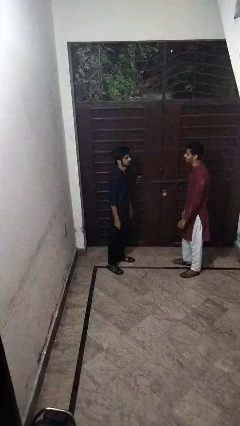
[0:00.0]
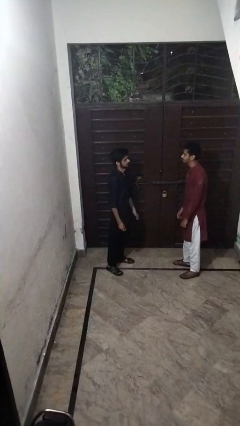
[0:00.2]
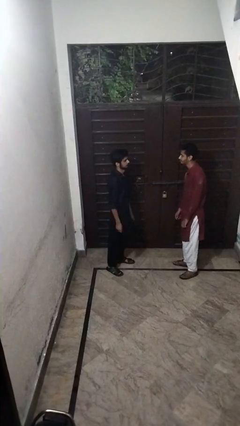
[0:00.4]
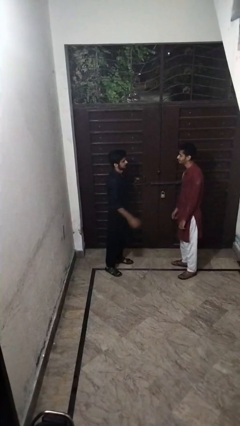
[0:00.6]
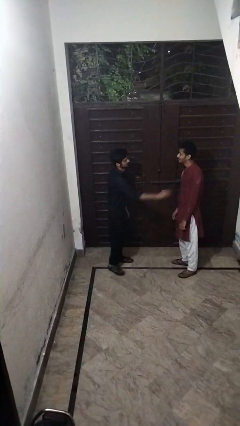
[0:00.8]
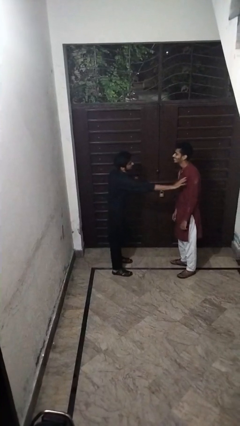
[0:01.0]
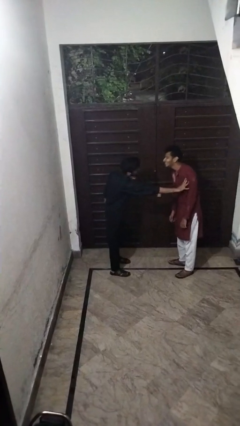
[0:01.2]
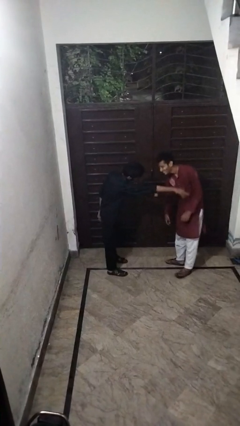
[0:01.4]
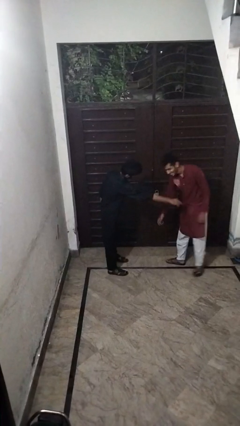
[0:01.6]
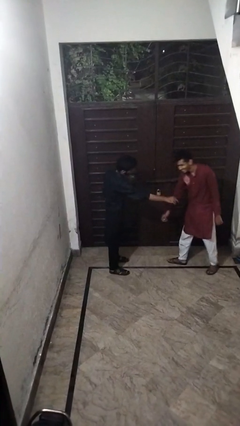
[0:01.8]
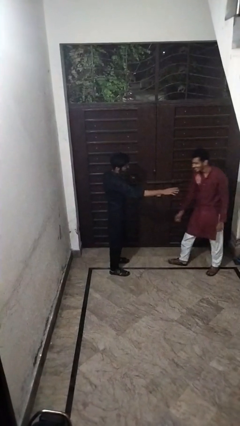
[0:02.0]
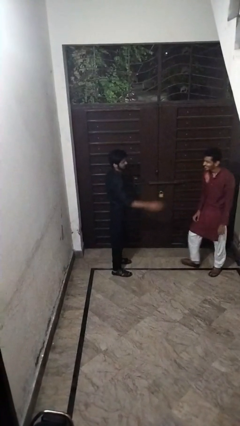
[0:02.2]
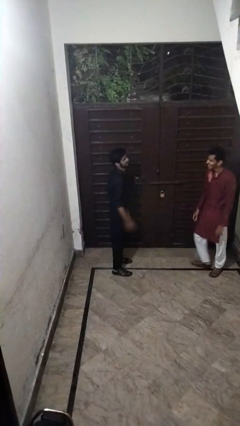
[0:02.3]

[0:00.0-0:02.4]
person shoves person

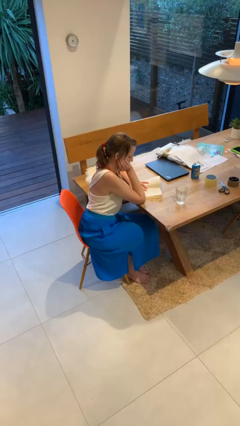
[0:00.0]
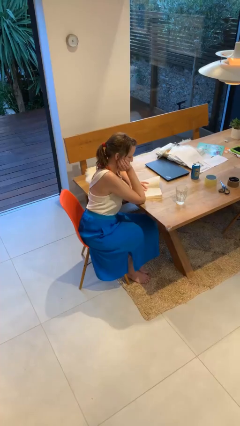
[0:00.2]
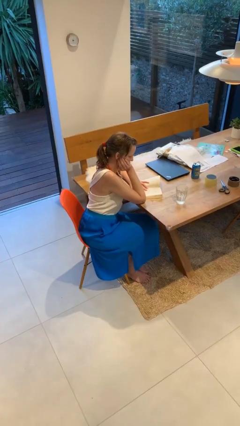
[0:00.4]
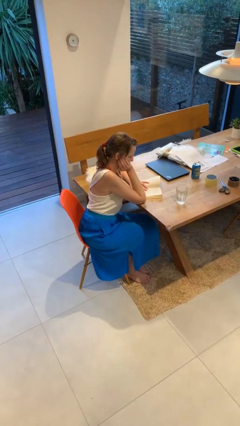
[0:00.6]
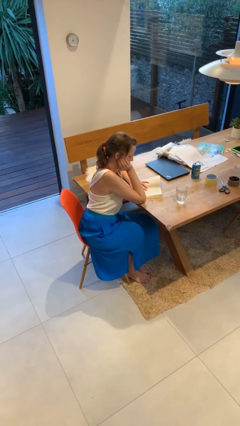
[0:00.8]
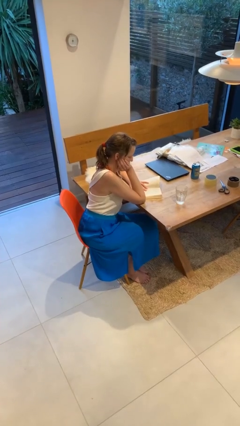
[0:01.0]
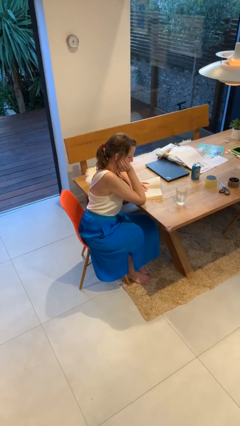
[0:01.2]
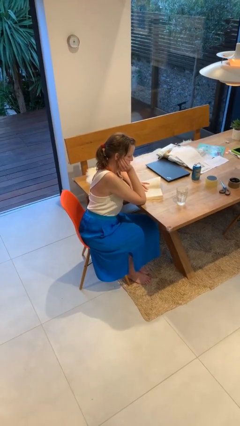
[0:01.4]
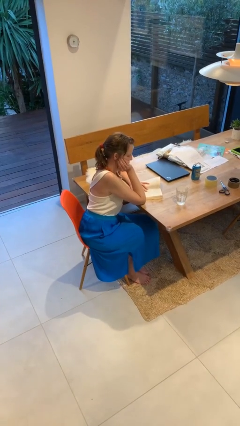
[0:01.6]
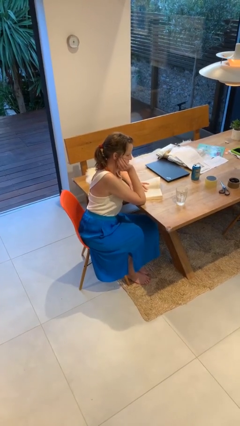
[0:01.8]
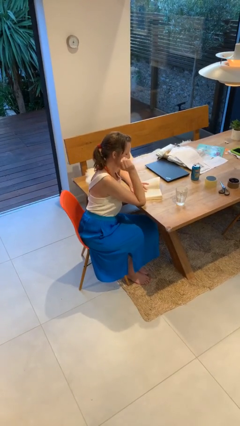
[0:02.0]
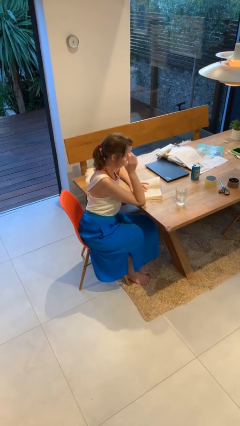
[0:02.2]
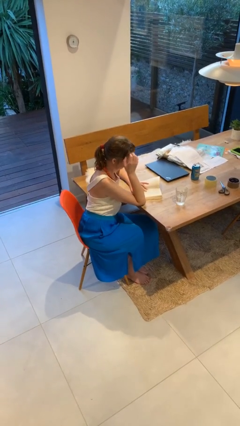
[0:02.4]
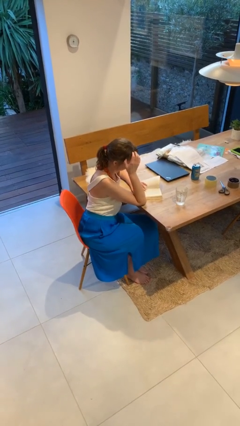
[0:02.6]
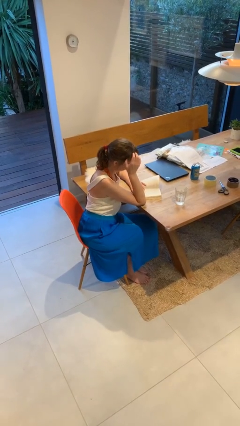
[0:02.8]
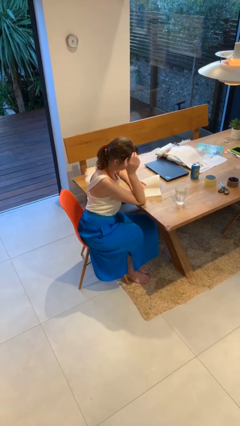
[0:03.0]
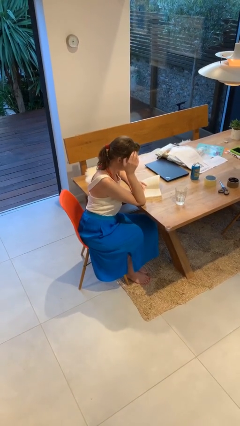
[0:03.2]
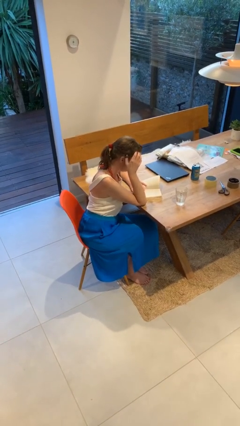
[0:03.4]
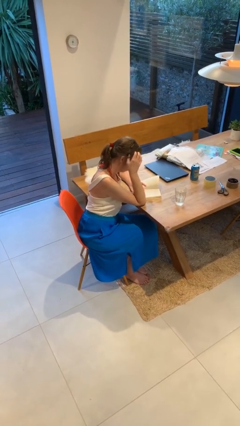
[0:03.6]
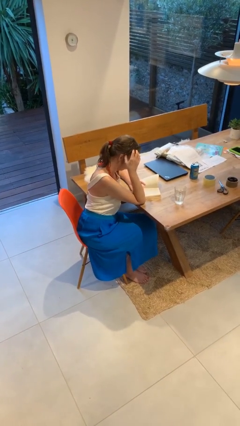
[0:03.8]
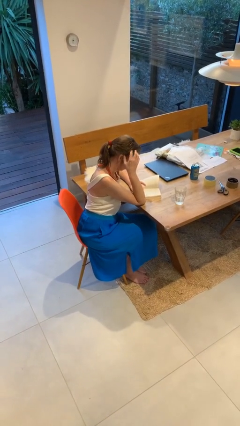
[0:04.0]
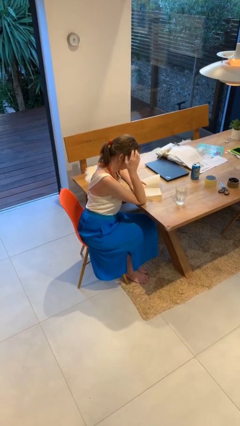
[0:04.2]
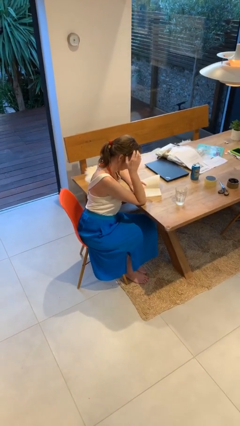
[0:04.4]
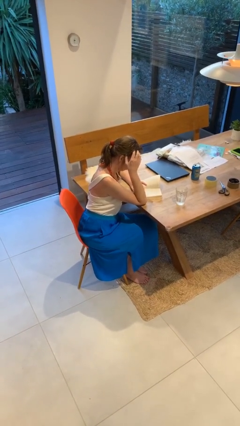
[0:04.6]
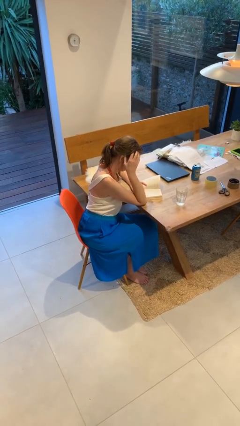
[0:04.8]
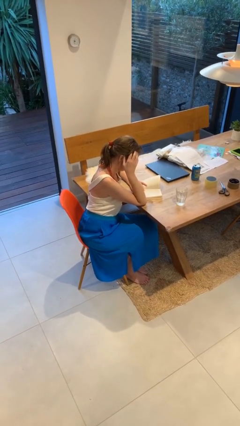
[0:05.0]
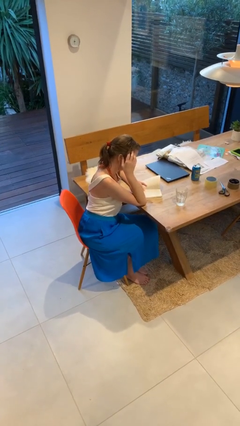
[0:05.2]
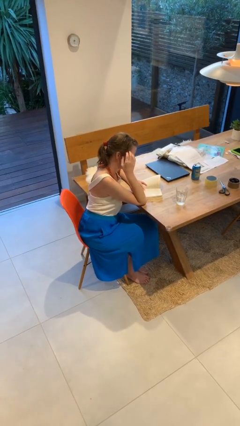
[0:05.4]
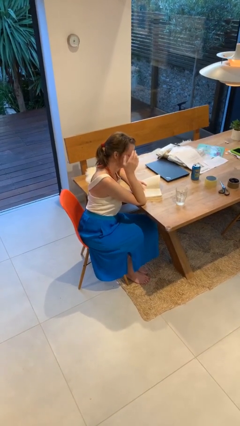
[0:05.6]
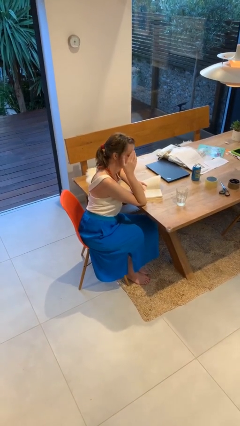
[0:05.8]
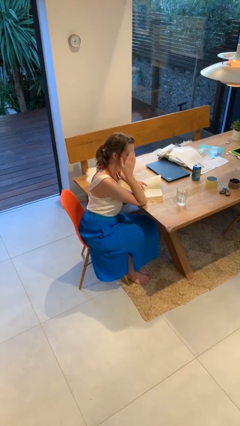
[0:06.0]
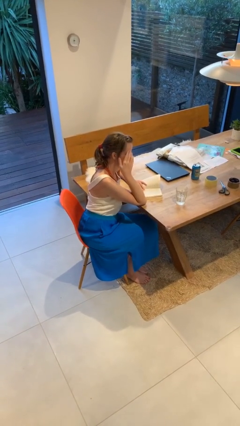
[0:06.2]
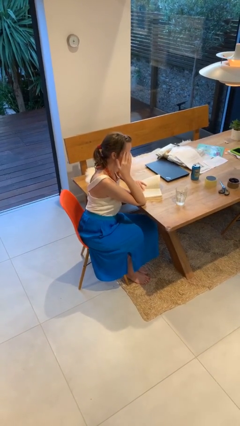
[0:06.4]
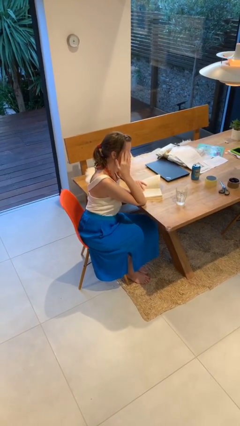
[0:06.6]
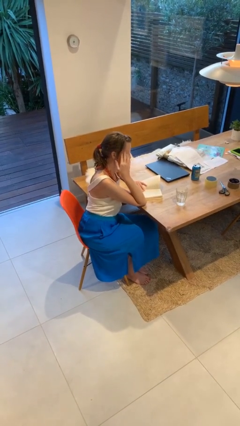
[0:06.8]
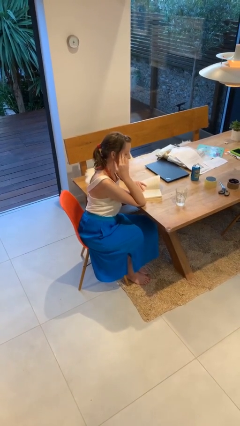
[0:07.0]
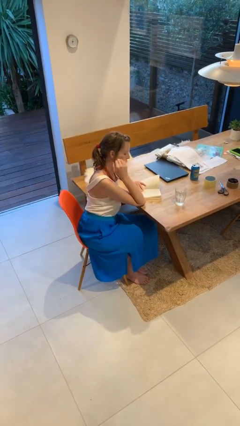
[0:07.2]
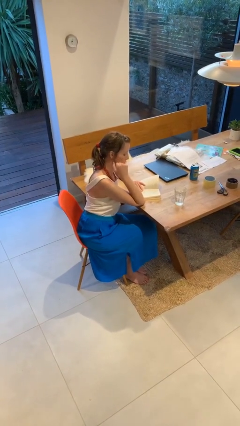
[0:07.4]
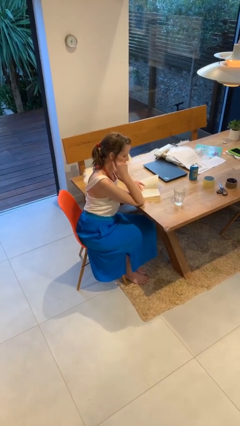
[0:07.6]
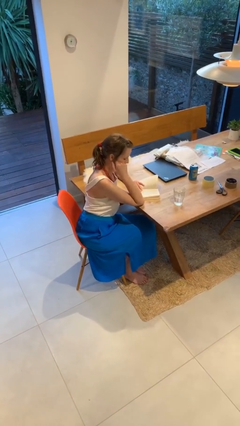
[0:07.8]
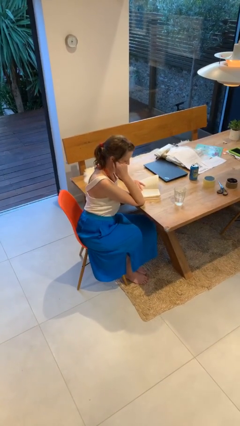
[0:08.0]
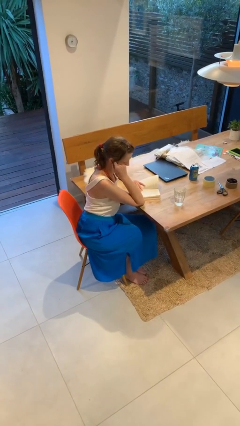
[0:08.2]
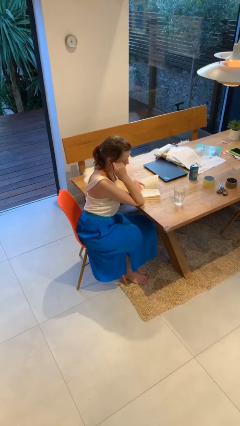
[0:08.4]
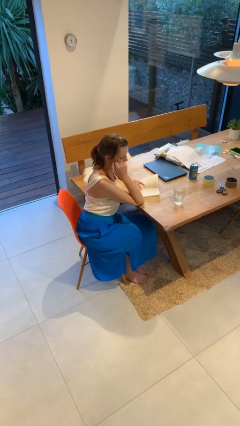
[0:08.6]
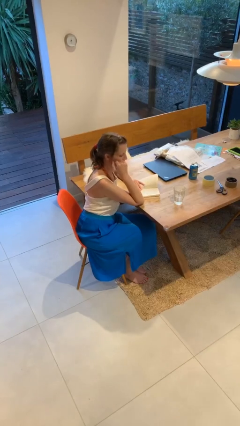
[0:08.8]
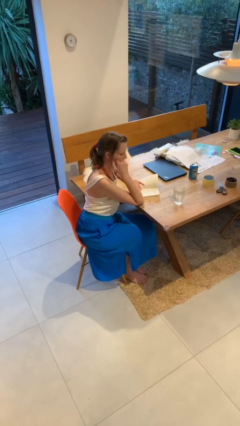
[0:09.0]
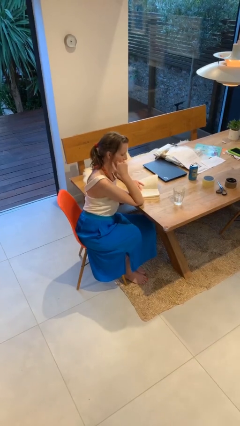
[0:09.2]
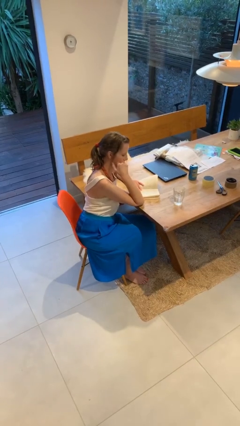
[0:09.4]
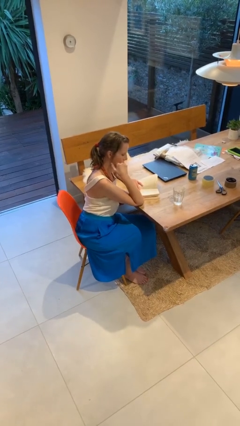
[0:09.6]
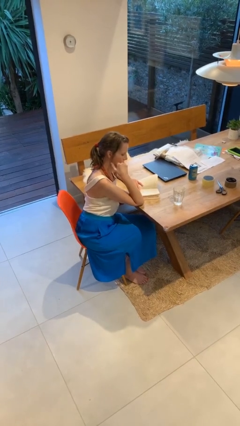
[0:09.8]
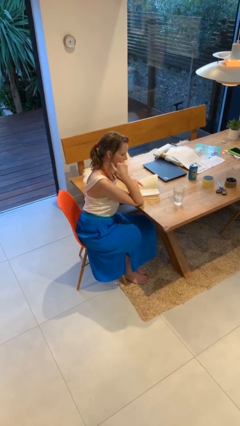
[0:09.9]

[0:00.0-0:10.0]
person reads document

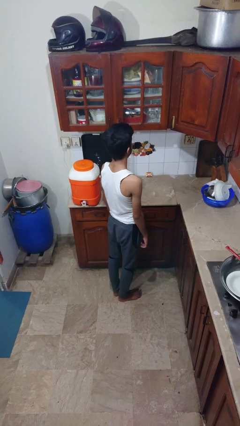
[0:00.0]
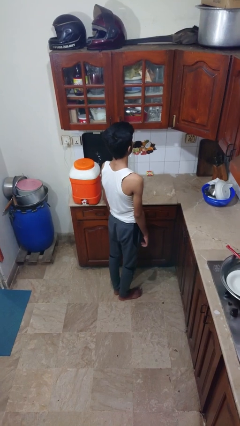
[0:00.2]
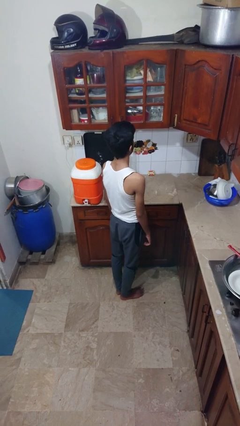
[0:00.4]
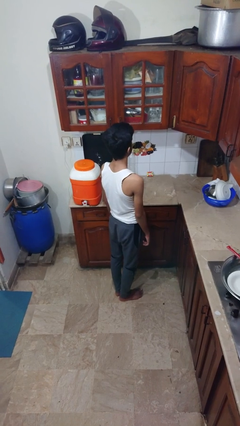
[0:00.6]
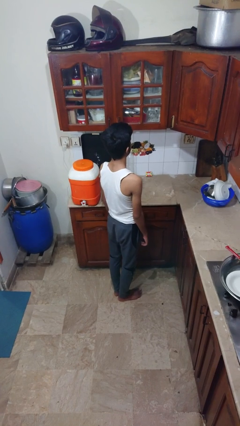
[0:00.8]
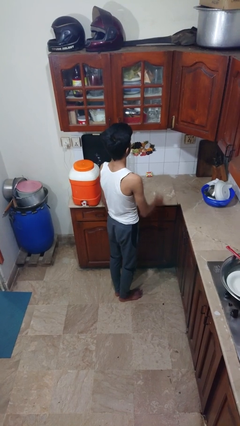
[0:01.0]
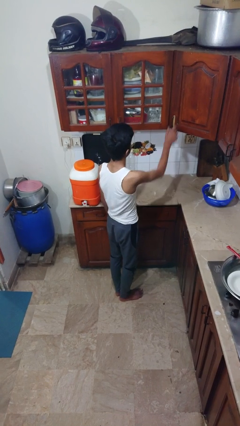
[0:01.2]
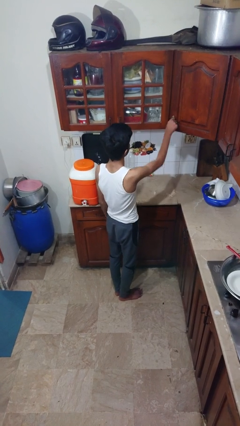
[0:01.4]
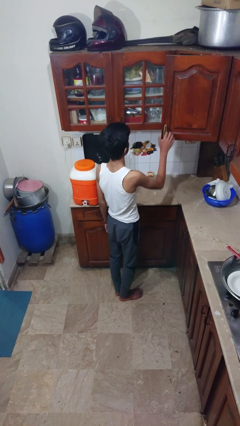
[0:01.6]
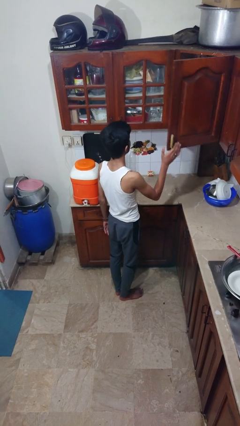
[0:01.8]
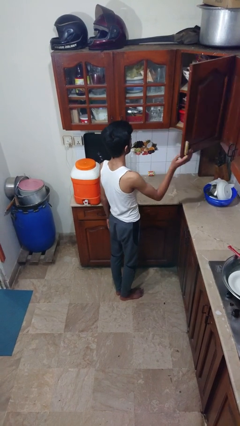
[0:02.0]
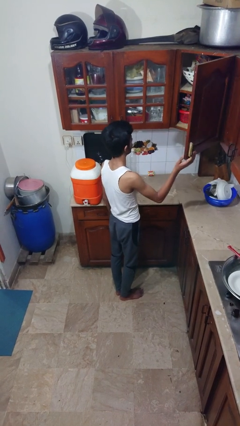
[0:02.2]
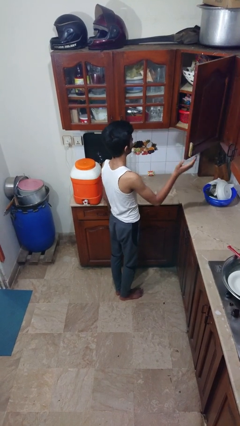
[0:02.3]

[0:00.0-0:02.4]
person closes cabinet

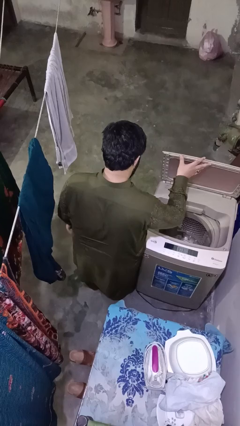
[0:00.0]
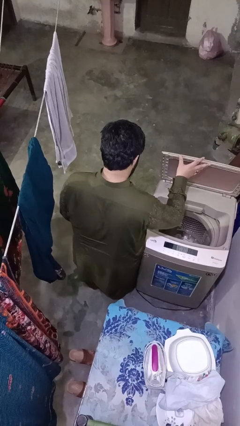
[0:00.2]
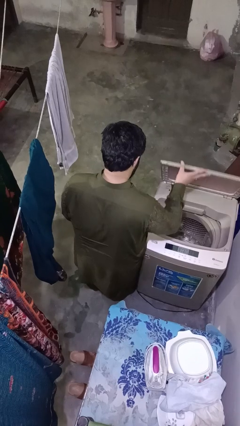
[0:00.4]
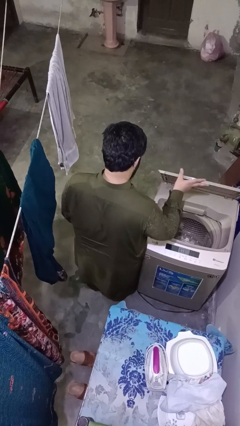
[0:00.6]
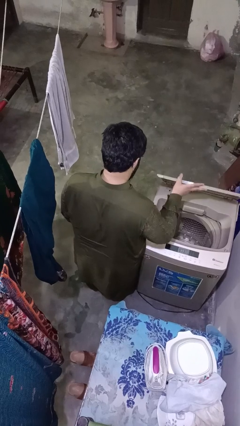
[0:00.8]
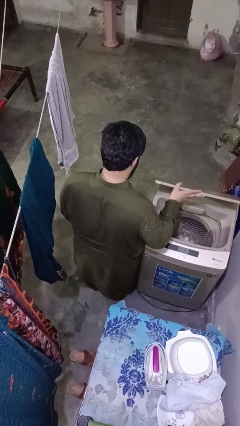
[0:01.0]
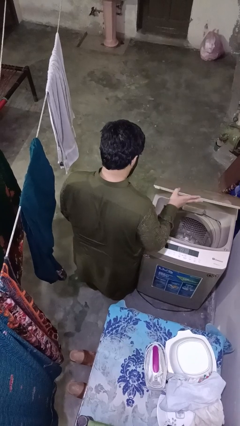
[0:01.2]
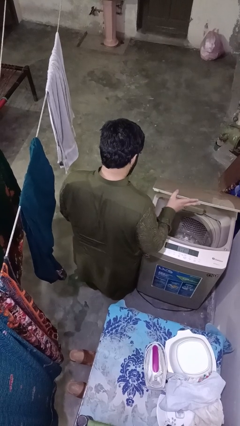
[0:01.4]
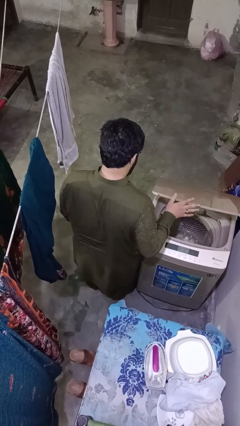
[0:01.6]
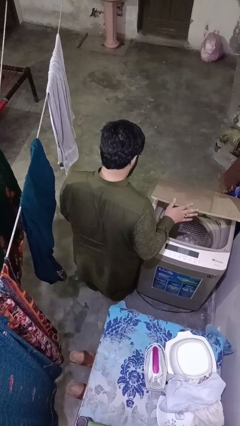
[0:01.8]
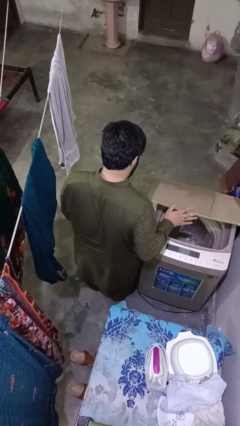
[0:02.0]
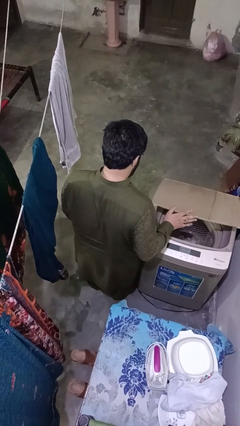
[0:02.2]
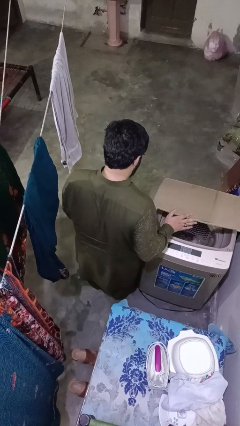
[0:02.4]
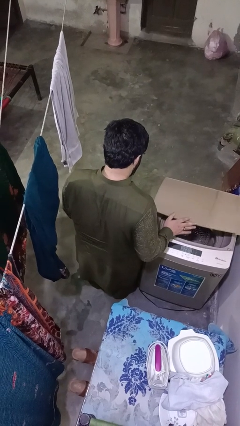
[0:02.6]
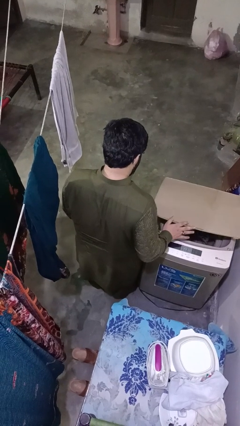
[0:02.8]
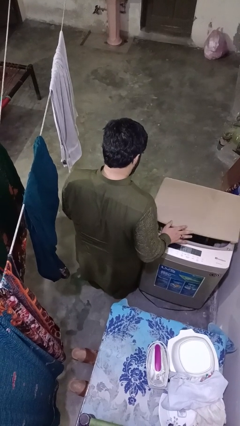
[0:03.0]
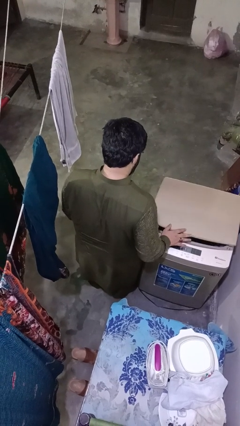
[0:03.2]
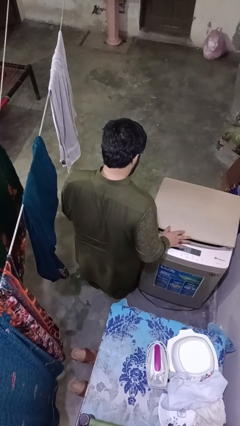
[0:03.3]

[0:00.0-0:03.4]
person closes clothes washer
